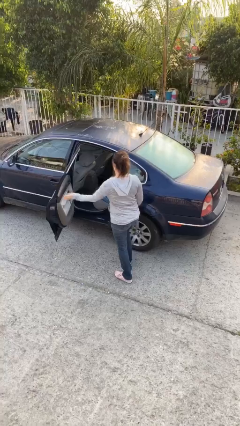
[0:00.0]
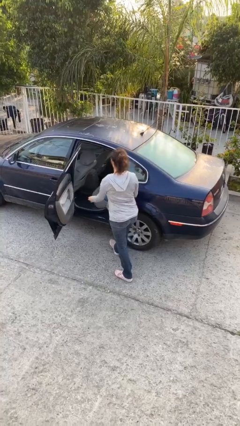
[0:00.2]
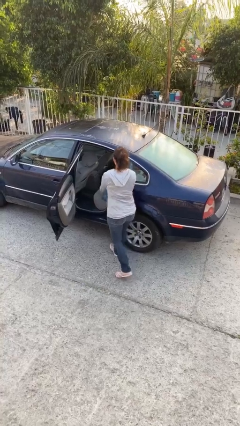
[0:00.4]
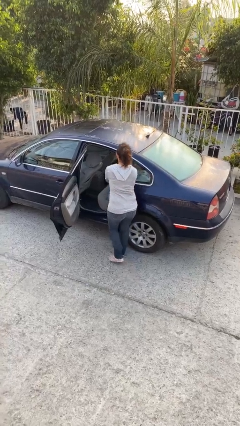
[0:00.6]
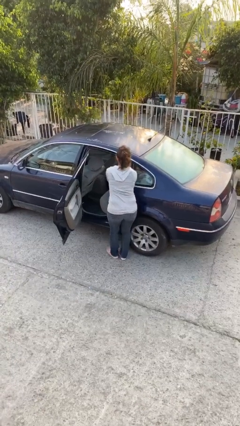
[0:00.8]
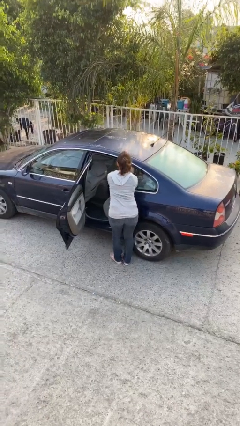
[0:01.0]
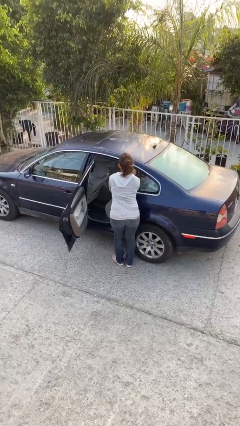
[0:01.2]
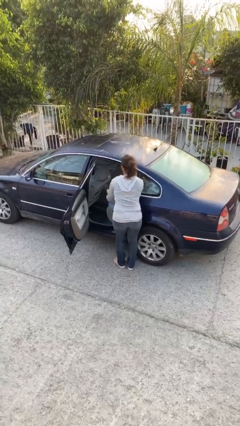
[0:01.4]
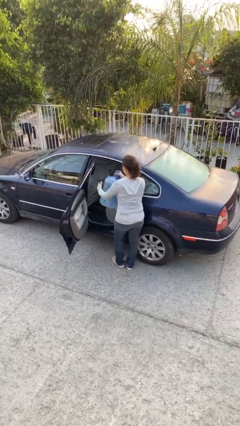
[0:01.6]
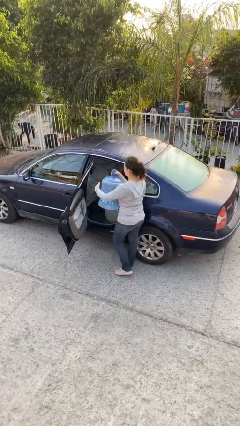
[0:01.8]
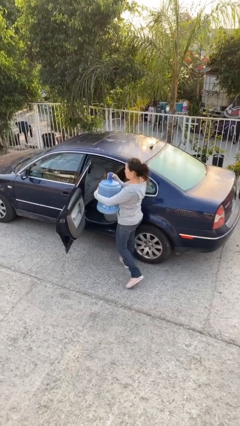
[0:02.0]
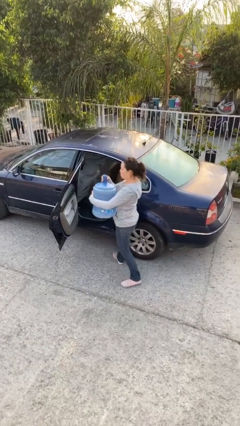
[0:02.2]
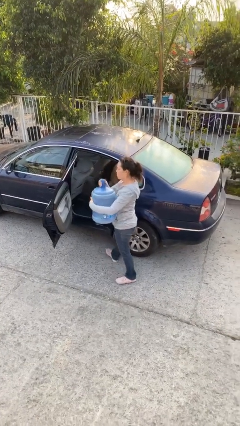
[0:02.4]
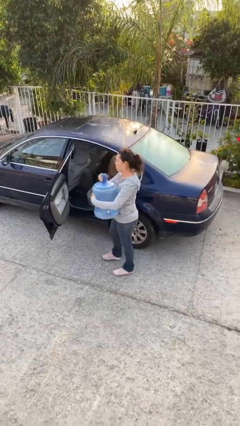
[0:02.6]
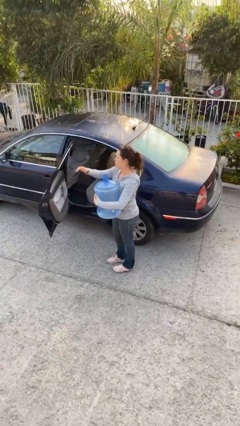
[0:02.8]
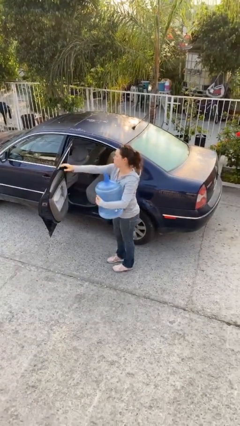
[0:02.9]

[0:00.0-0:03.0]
person unloads car

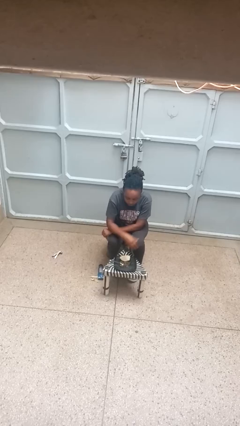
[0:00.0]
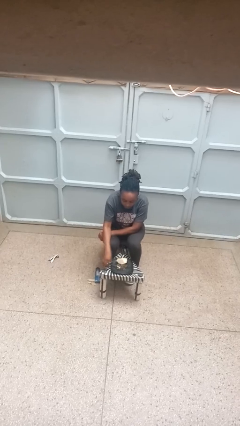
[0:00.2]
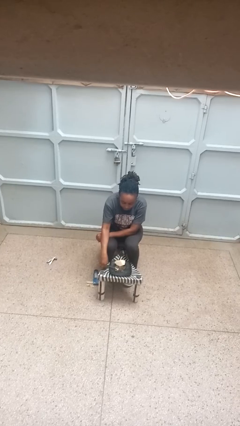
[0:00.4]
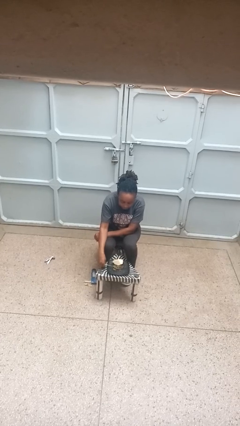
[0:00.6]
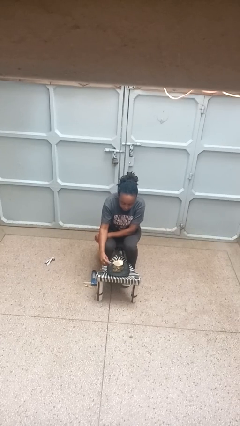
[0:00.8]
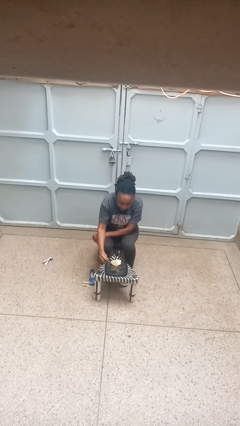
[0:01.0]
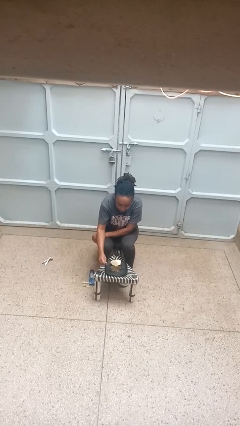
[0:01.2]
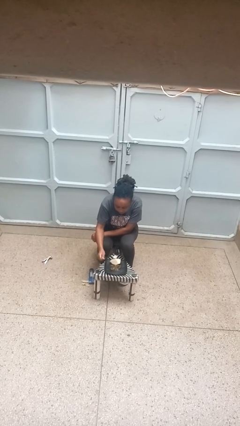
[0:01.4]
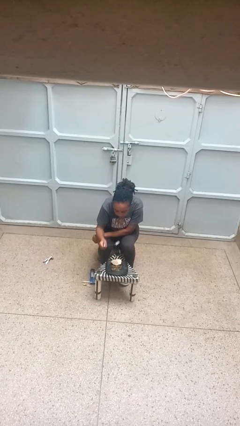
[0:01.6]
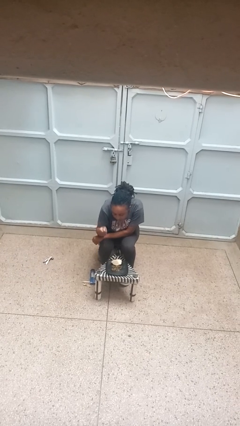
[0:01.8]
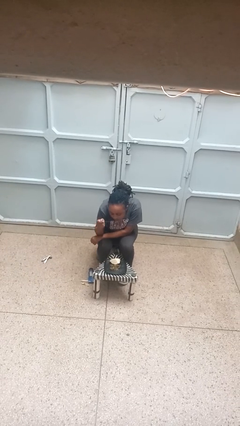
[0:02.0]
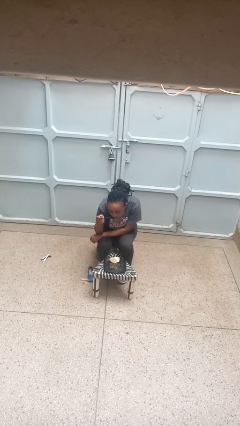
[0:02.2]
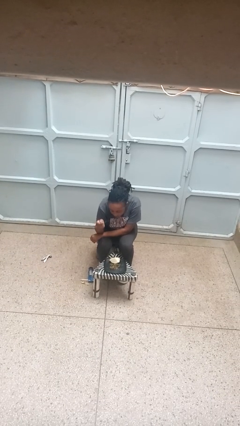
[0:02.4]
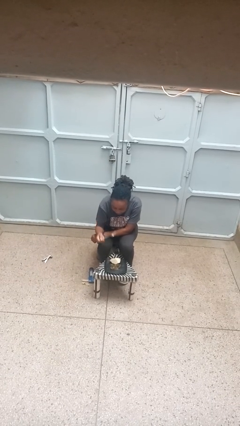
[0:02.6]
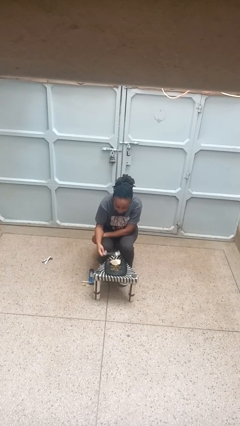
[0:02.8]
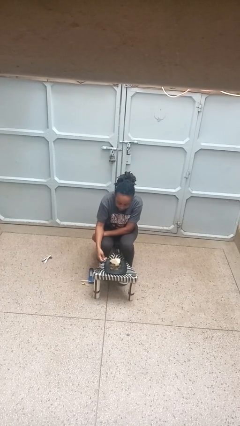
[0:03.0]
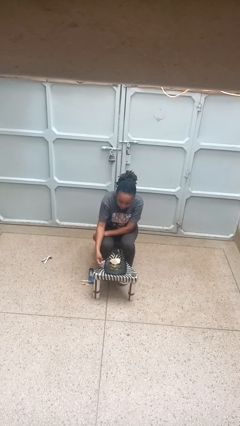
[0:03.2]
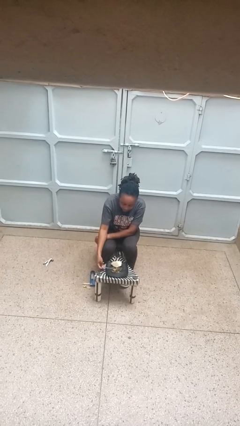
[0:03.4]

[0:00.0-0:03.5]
person eats with utensil

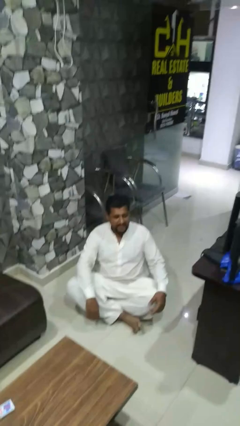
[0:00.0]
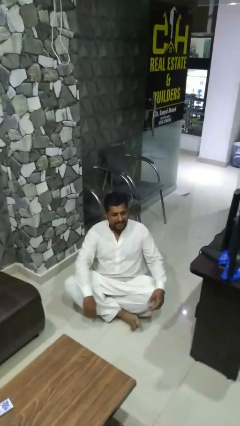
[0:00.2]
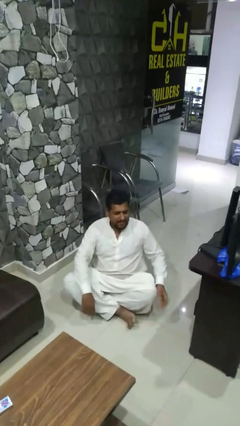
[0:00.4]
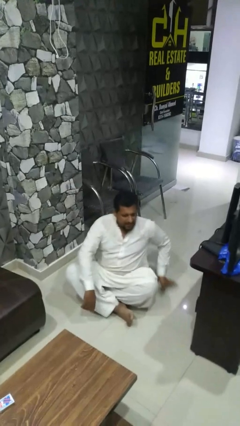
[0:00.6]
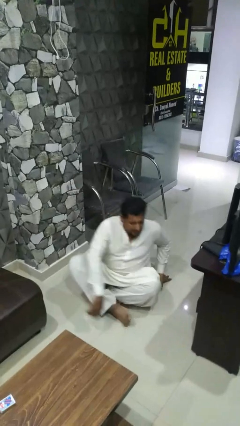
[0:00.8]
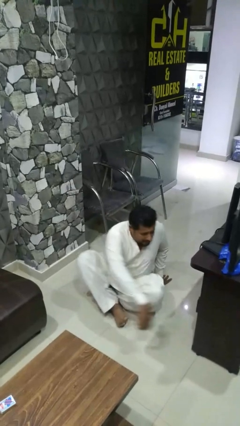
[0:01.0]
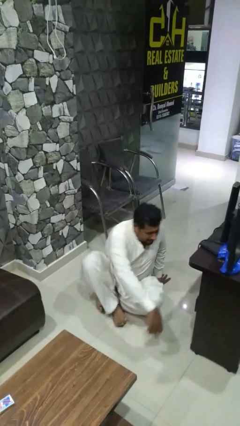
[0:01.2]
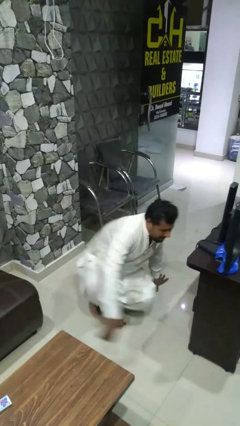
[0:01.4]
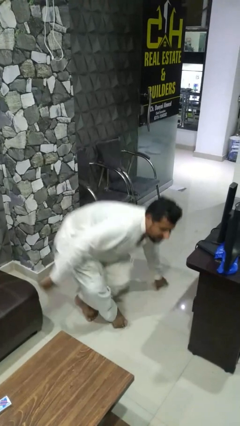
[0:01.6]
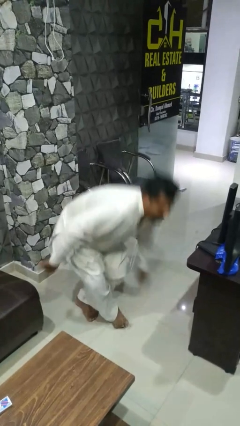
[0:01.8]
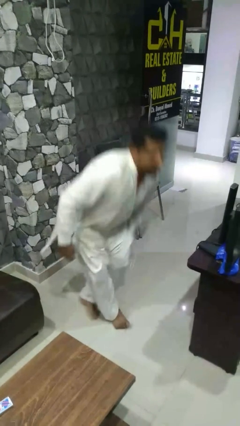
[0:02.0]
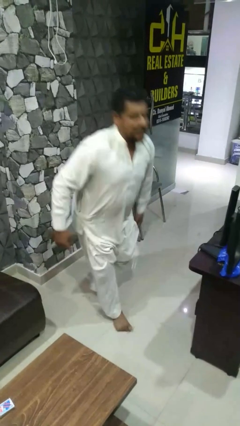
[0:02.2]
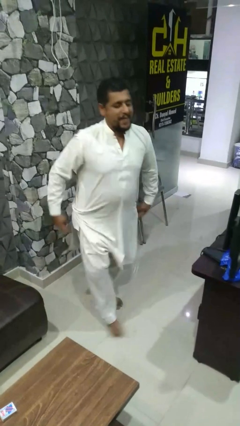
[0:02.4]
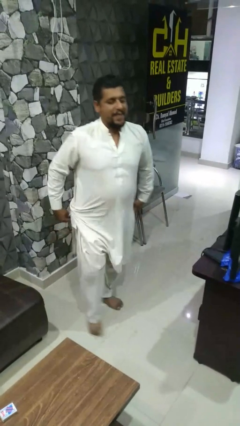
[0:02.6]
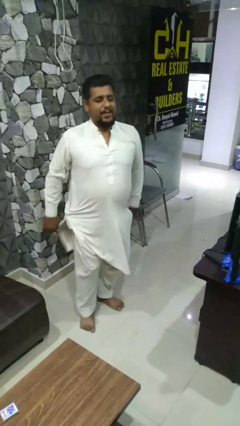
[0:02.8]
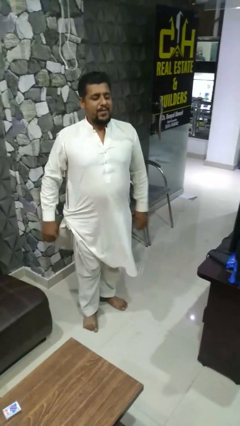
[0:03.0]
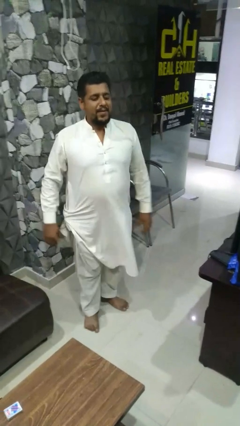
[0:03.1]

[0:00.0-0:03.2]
person stands up from floor

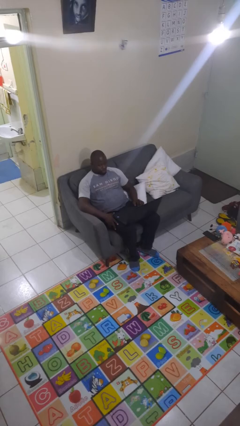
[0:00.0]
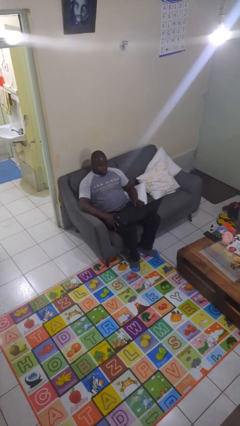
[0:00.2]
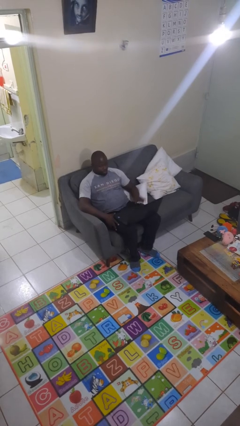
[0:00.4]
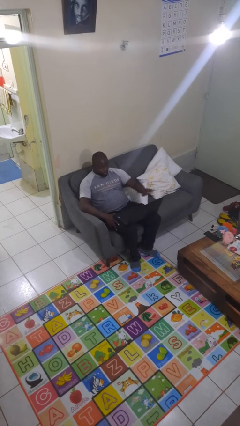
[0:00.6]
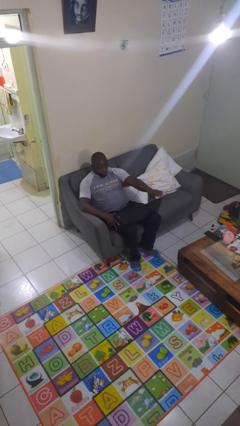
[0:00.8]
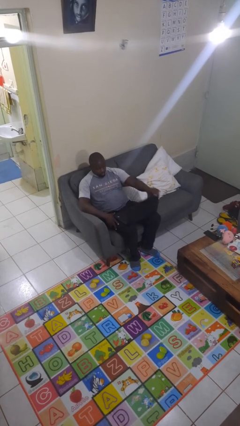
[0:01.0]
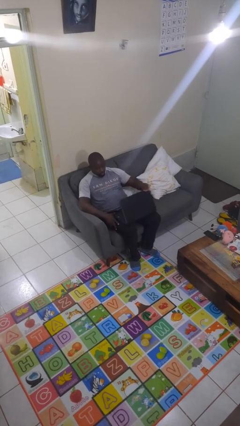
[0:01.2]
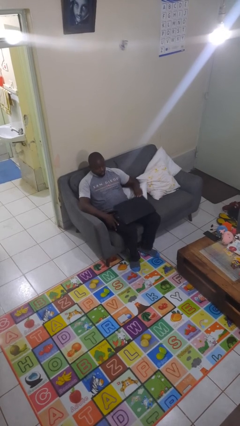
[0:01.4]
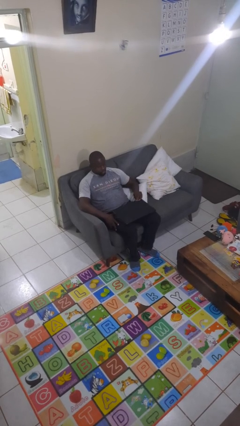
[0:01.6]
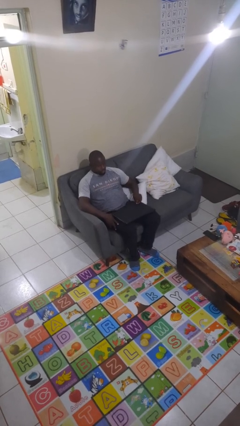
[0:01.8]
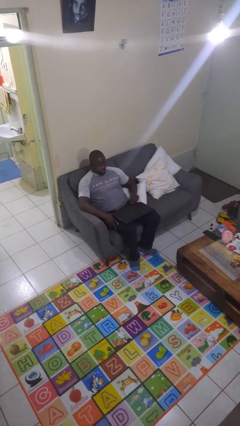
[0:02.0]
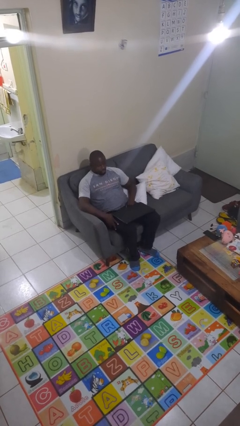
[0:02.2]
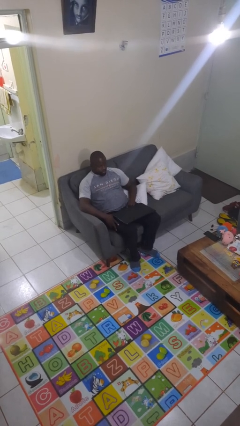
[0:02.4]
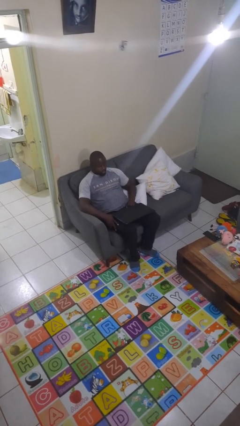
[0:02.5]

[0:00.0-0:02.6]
person closes laptop

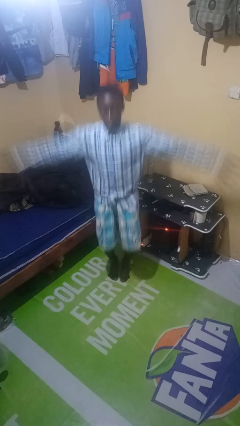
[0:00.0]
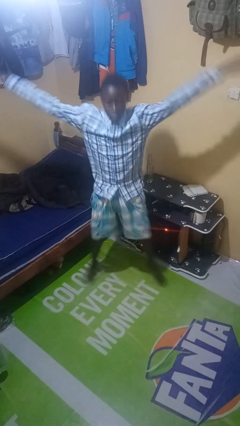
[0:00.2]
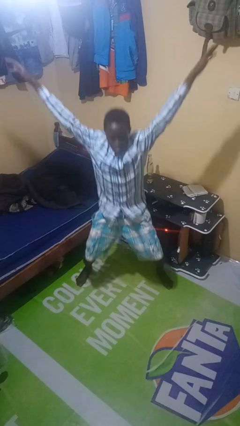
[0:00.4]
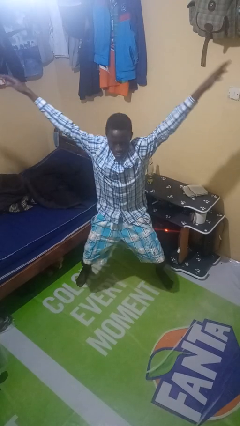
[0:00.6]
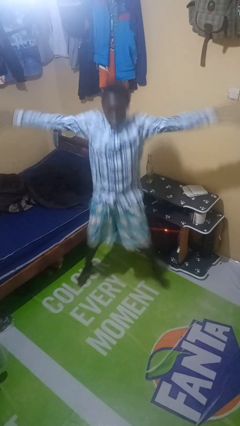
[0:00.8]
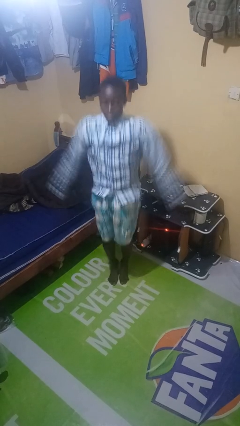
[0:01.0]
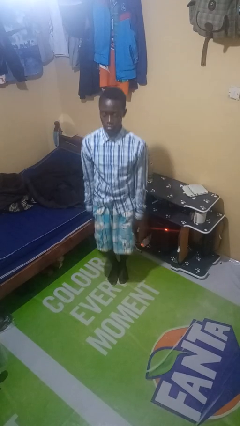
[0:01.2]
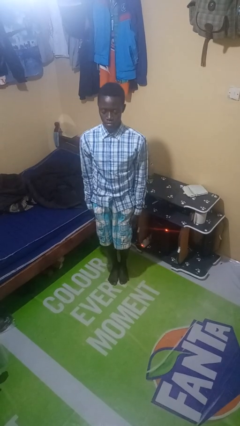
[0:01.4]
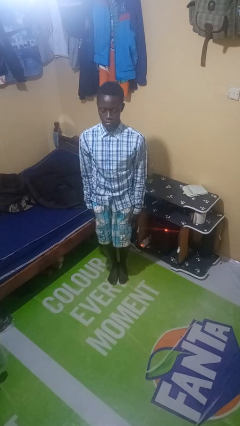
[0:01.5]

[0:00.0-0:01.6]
person exercises with jumping jacks

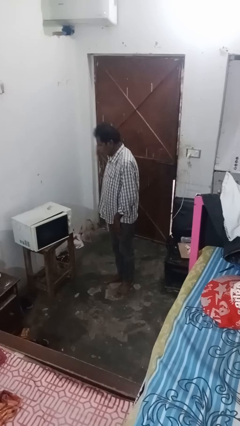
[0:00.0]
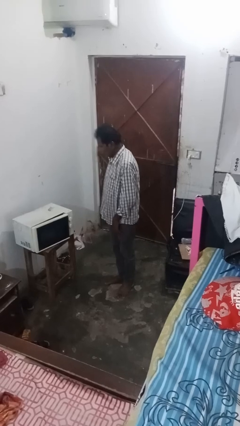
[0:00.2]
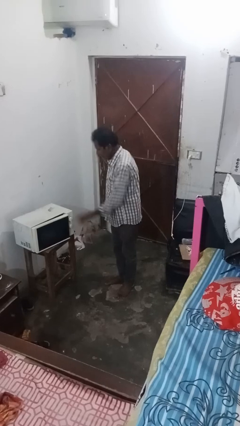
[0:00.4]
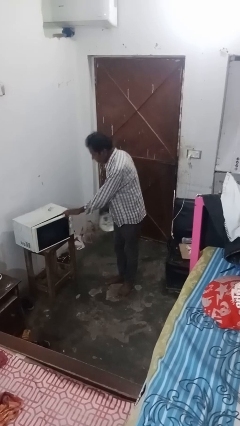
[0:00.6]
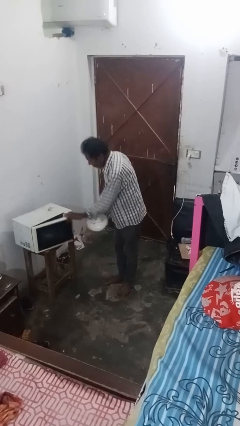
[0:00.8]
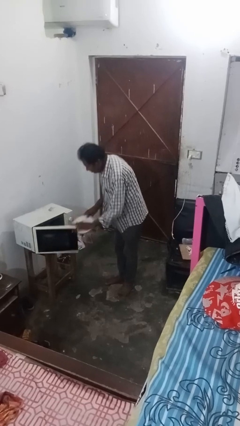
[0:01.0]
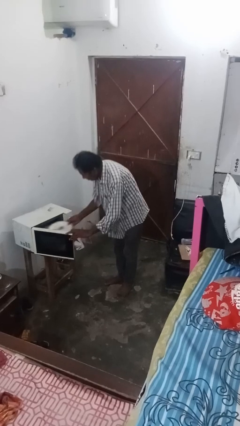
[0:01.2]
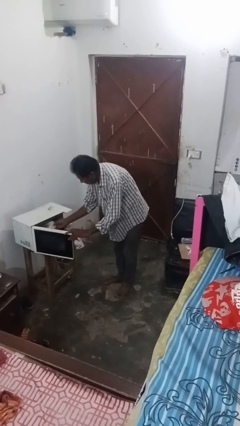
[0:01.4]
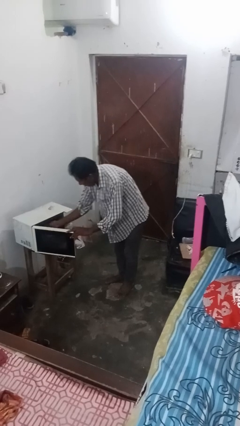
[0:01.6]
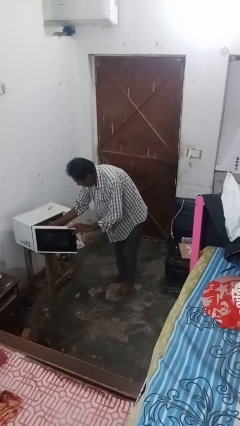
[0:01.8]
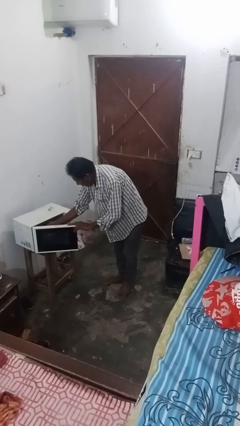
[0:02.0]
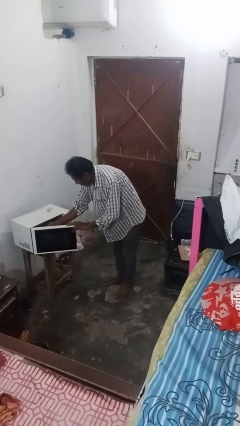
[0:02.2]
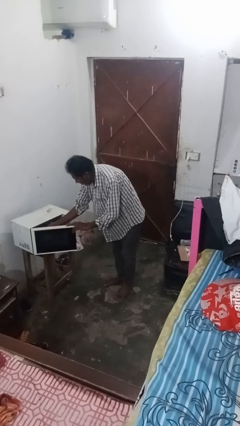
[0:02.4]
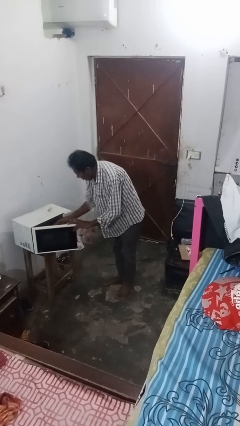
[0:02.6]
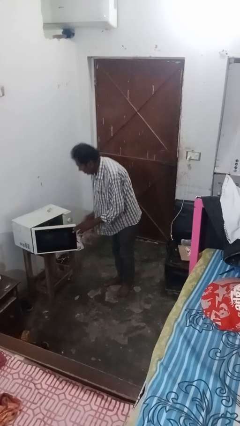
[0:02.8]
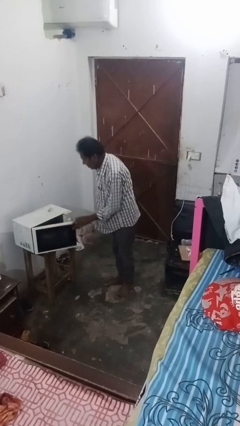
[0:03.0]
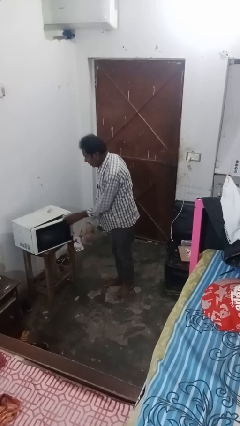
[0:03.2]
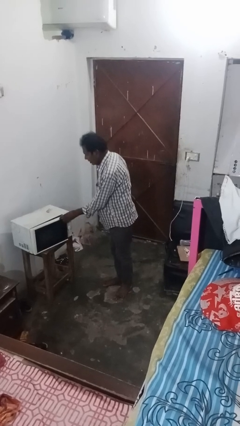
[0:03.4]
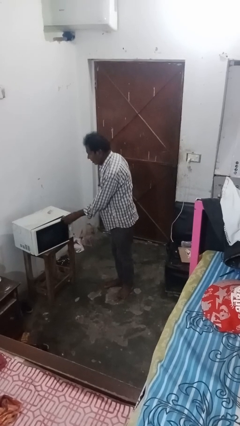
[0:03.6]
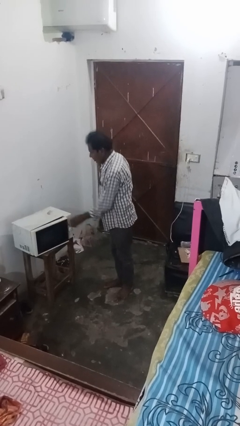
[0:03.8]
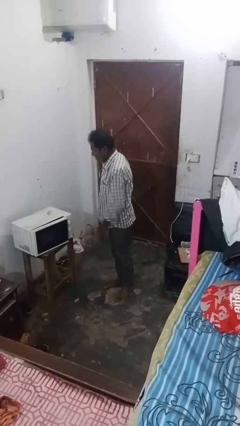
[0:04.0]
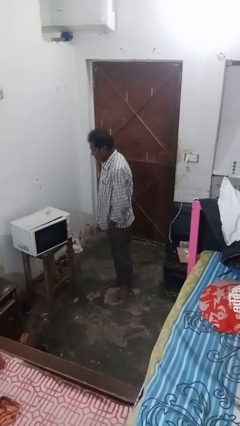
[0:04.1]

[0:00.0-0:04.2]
person puts object into microwave
